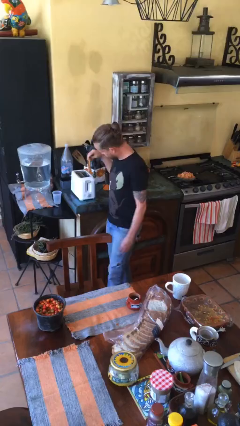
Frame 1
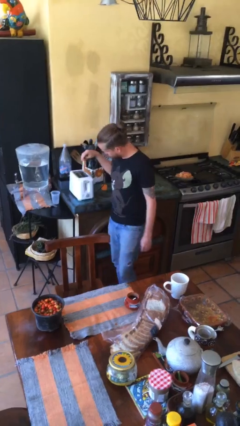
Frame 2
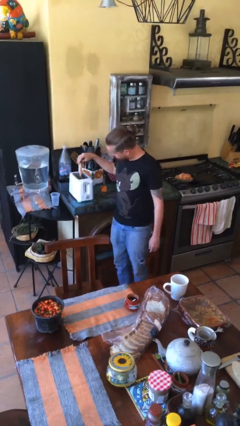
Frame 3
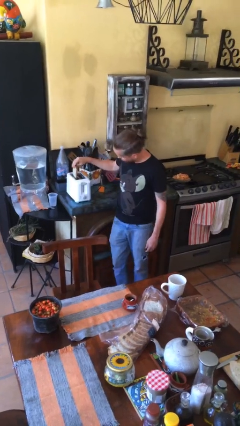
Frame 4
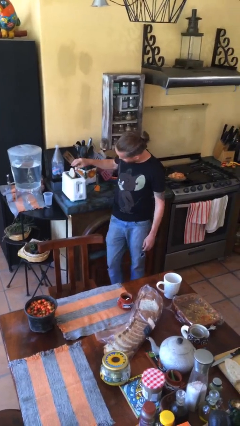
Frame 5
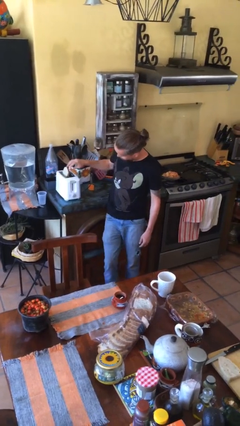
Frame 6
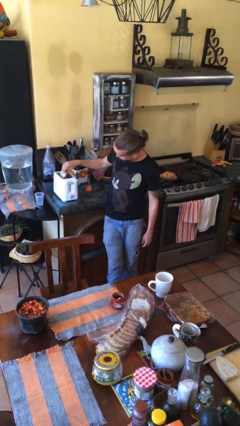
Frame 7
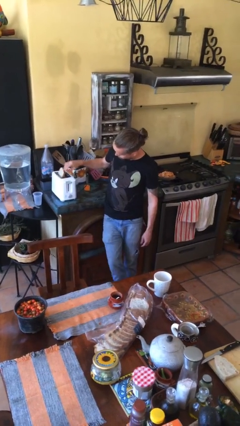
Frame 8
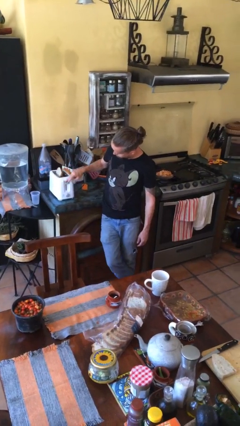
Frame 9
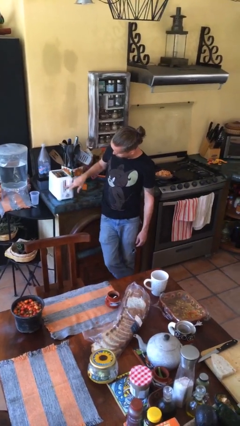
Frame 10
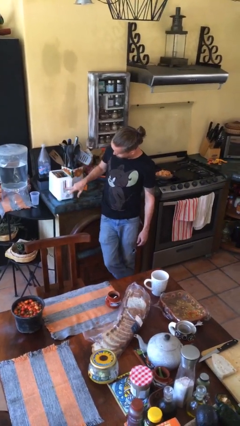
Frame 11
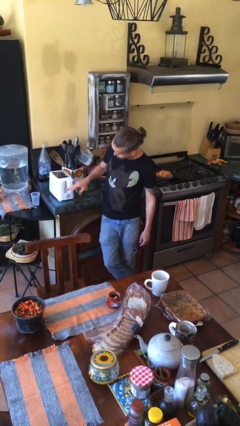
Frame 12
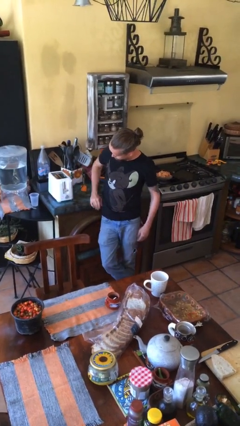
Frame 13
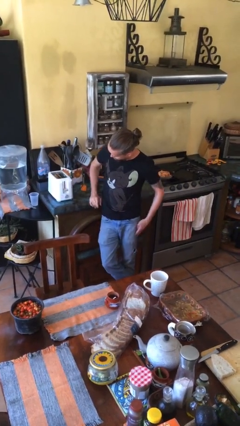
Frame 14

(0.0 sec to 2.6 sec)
person puts object into toaster

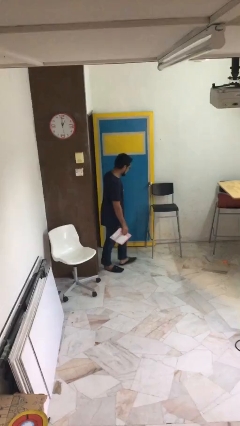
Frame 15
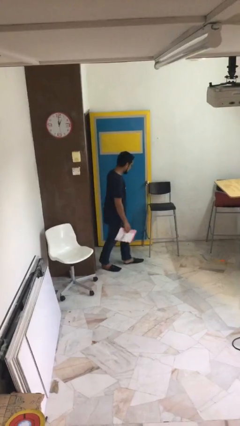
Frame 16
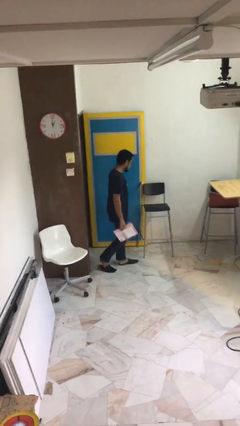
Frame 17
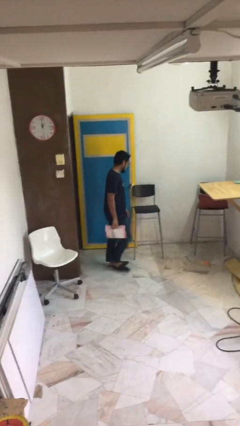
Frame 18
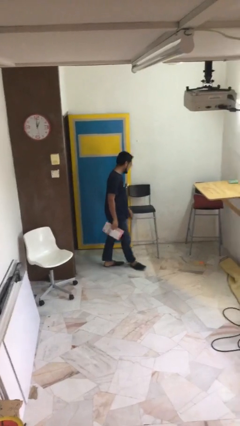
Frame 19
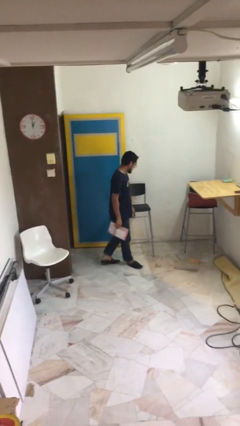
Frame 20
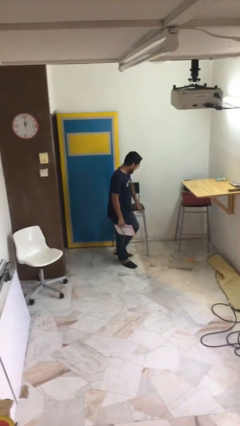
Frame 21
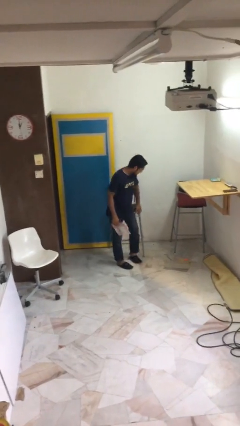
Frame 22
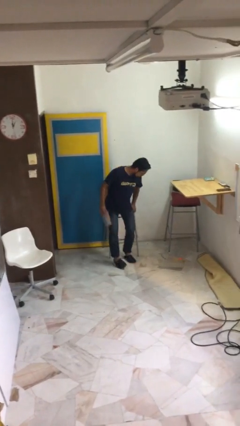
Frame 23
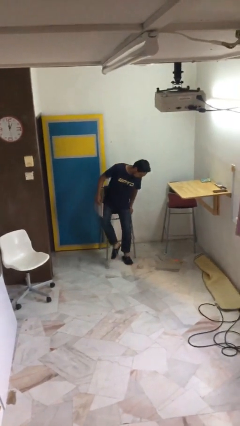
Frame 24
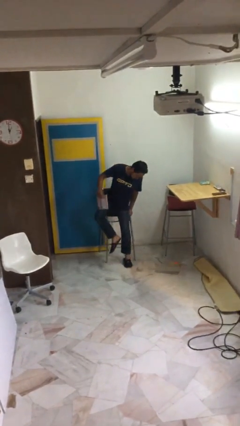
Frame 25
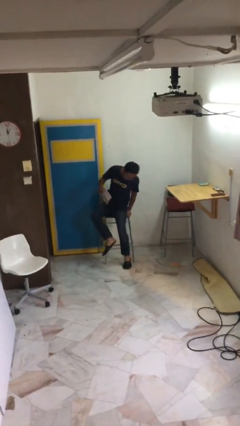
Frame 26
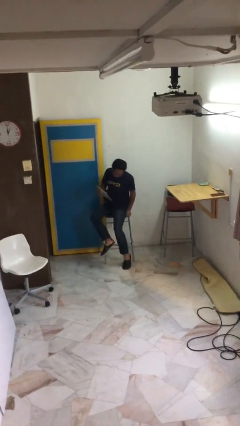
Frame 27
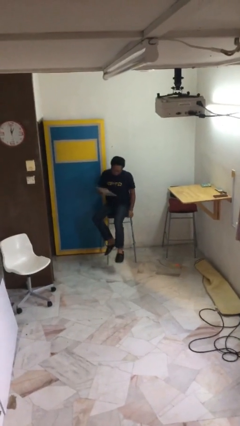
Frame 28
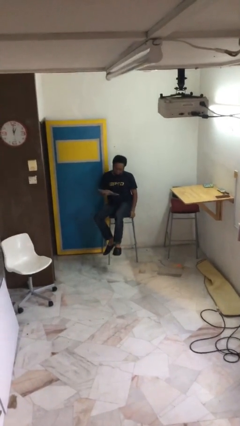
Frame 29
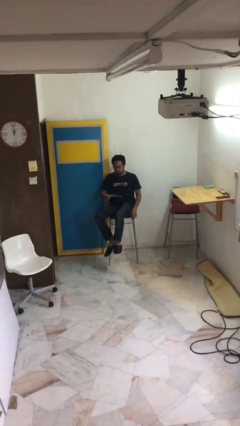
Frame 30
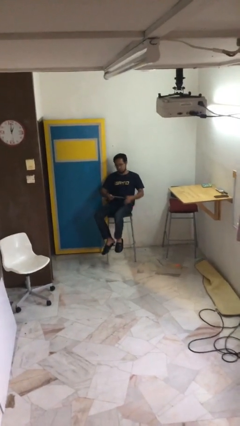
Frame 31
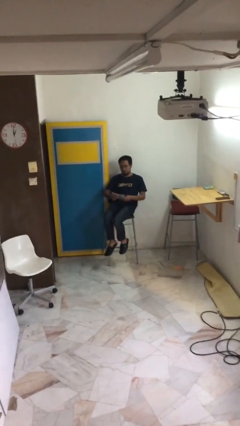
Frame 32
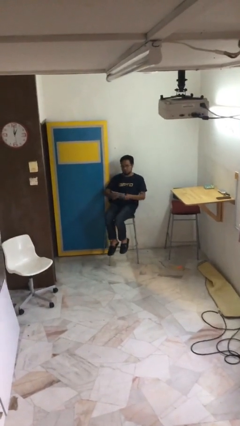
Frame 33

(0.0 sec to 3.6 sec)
person sits down

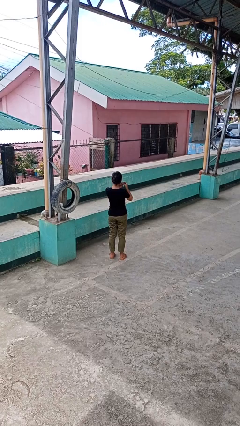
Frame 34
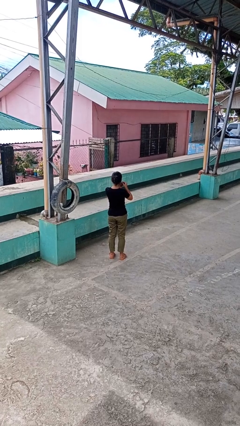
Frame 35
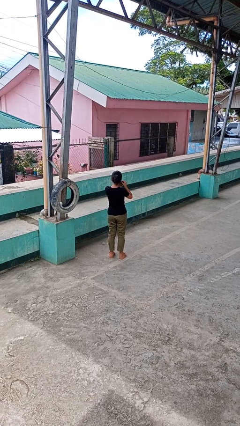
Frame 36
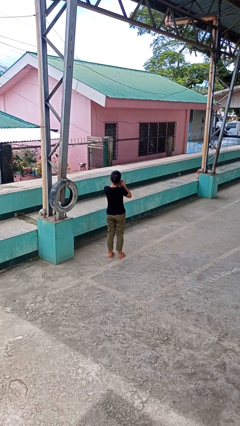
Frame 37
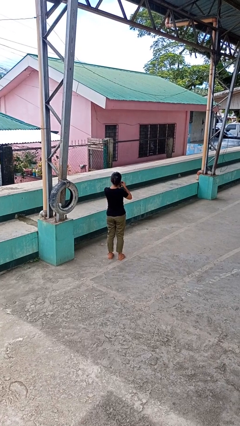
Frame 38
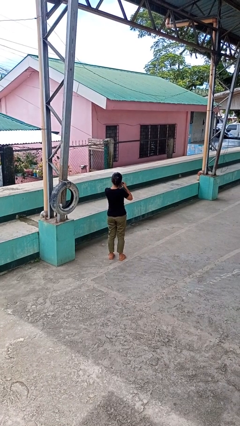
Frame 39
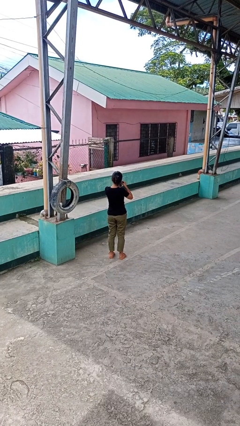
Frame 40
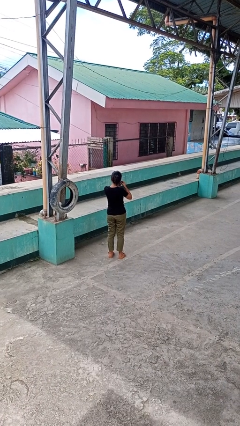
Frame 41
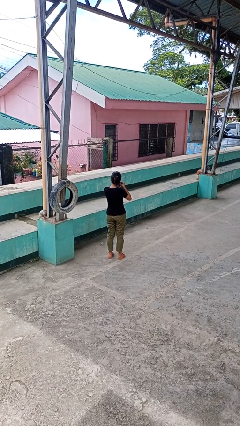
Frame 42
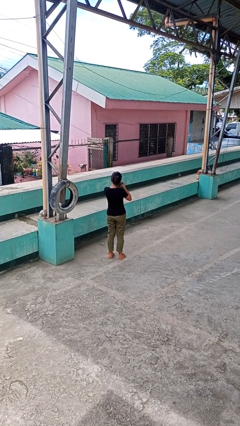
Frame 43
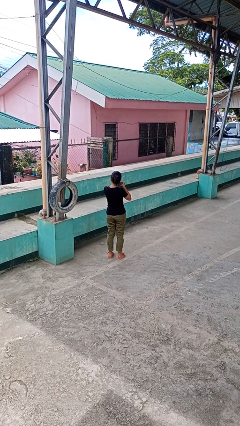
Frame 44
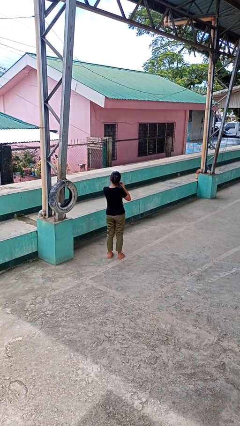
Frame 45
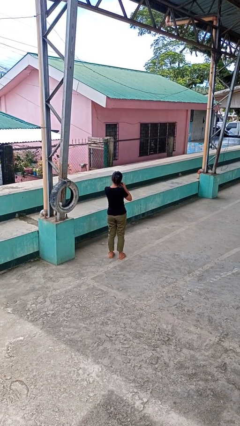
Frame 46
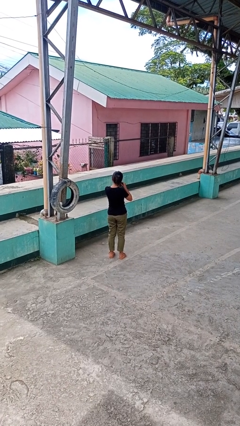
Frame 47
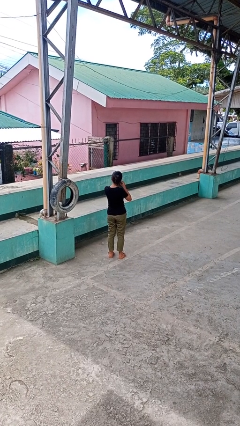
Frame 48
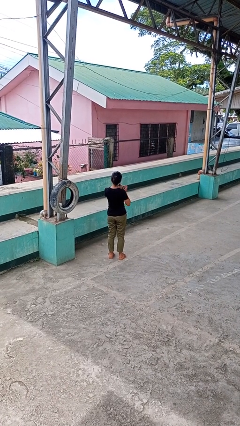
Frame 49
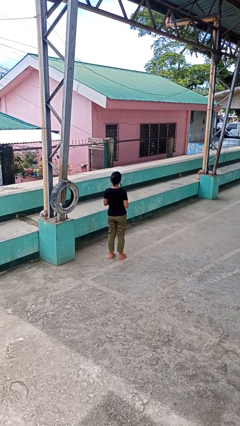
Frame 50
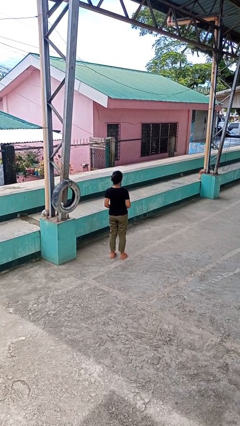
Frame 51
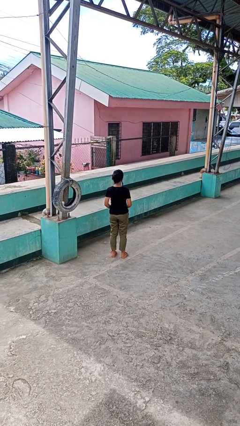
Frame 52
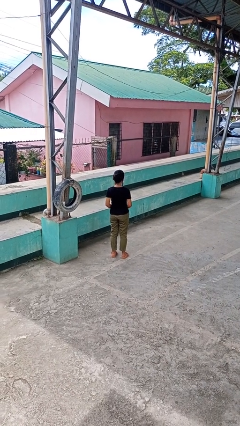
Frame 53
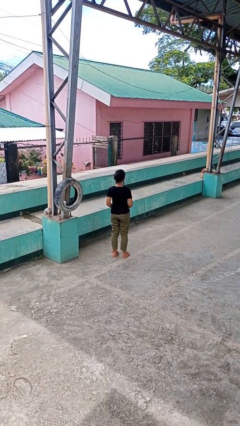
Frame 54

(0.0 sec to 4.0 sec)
person puts on earrings

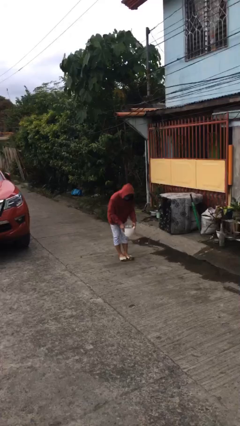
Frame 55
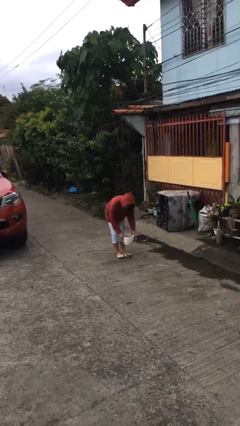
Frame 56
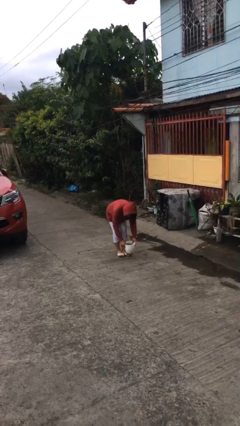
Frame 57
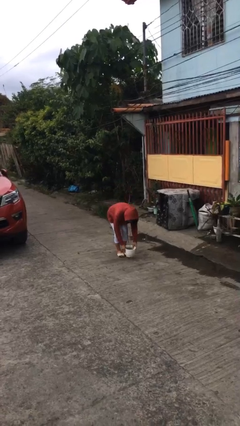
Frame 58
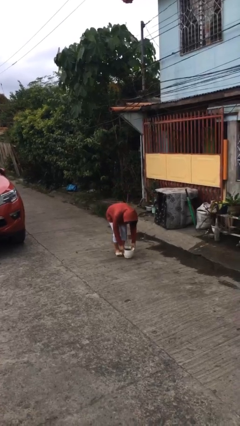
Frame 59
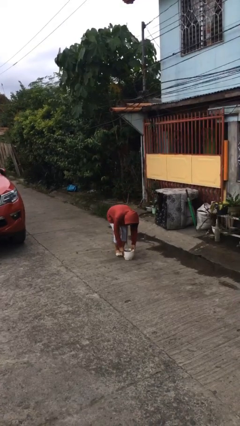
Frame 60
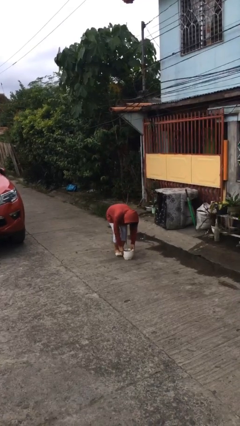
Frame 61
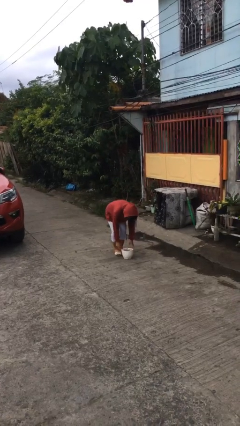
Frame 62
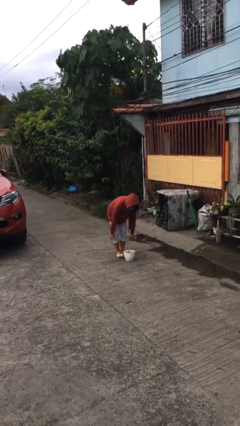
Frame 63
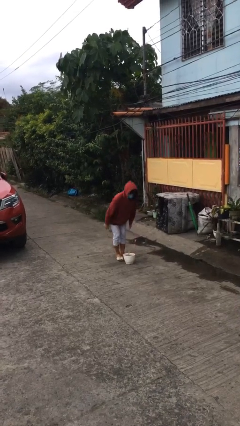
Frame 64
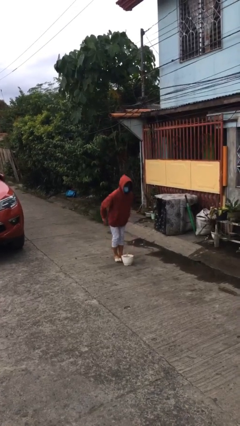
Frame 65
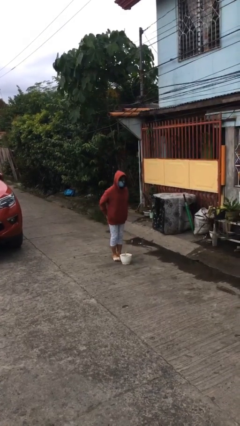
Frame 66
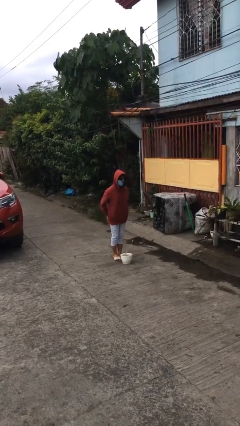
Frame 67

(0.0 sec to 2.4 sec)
person puts down object on floor

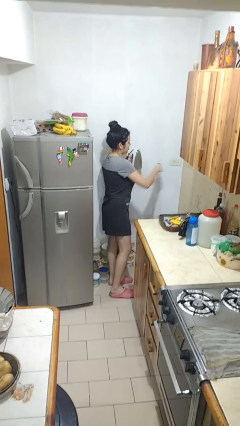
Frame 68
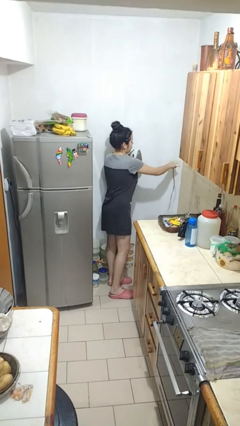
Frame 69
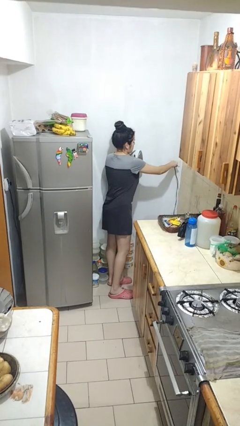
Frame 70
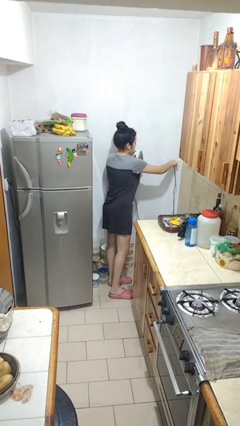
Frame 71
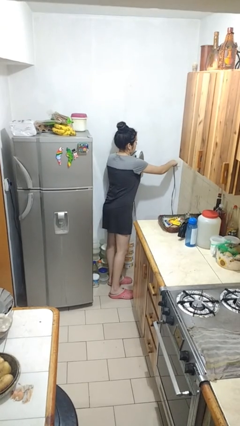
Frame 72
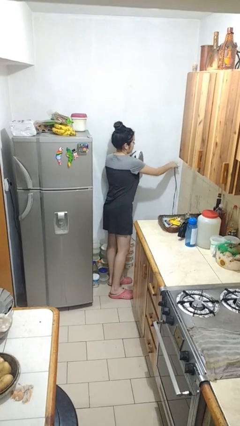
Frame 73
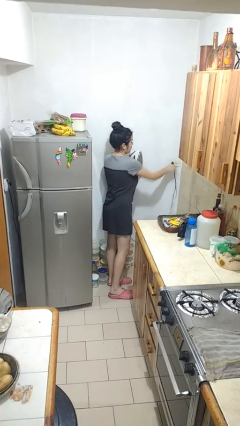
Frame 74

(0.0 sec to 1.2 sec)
person plugs into electrical socket

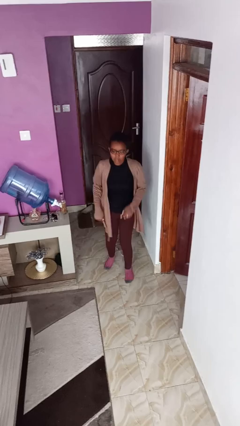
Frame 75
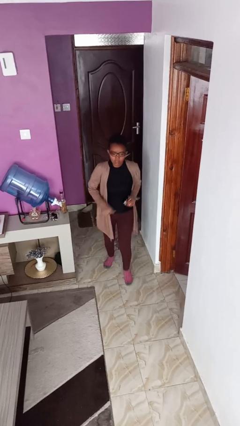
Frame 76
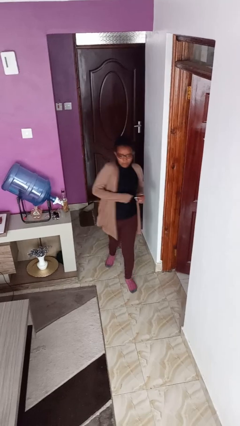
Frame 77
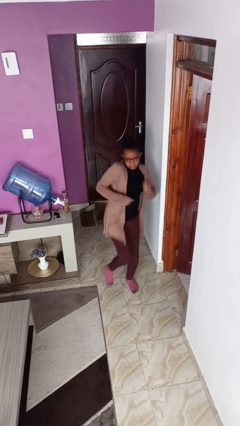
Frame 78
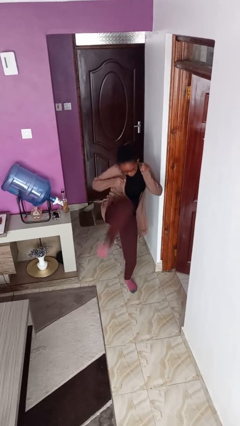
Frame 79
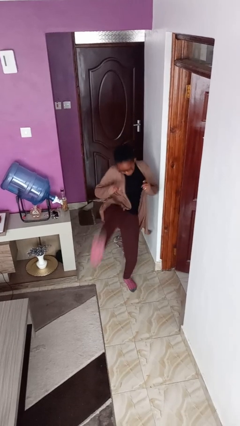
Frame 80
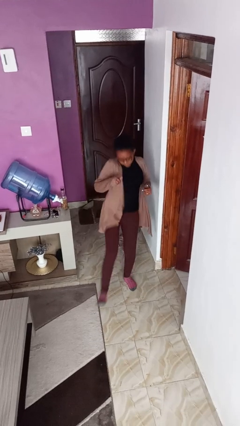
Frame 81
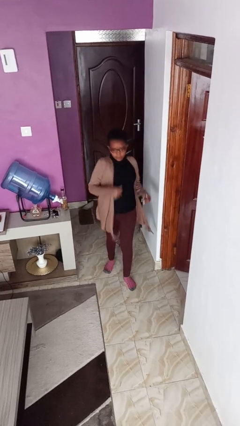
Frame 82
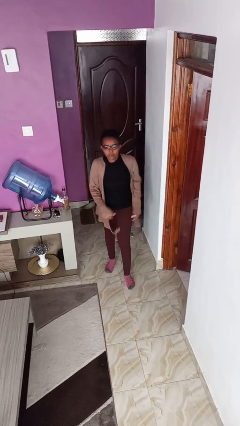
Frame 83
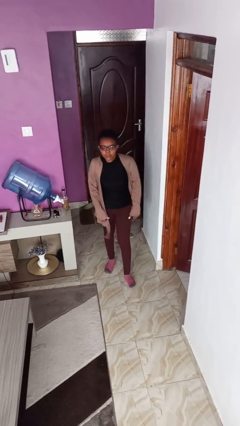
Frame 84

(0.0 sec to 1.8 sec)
person karate kicks

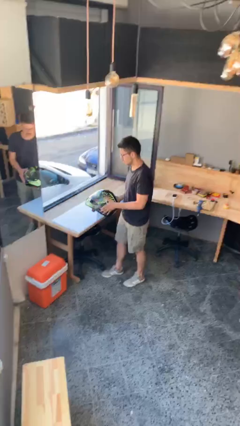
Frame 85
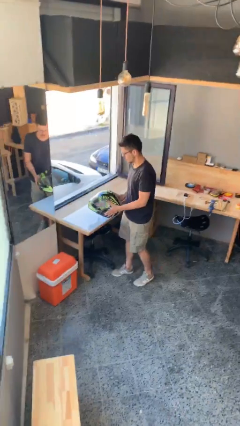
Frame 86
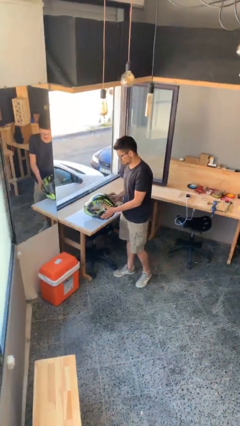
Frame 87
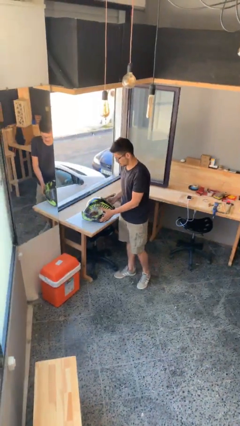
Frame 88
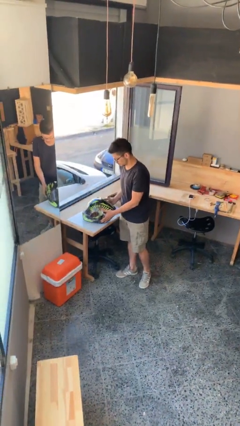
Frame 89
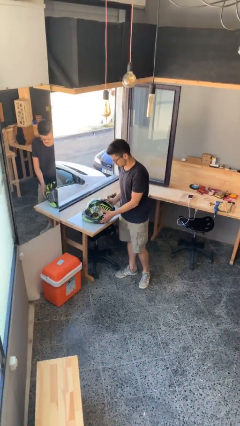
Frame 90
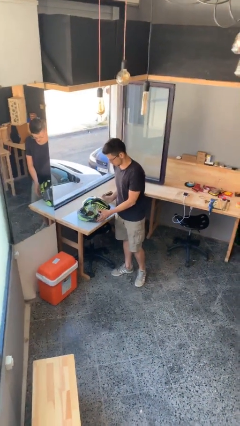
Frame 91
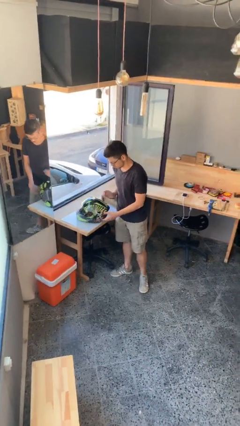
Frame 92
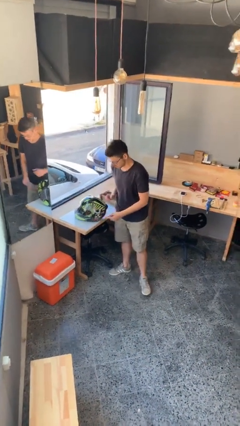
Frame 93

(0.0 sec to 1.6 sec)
person puts down object on table
